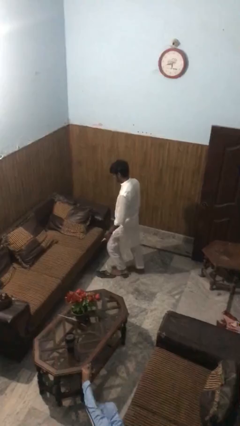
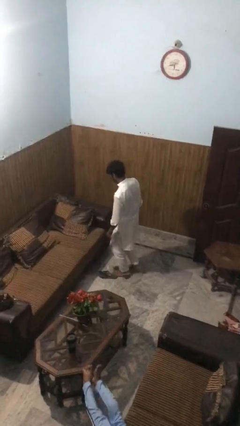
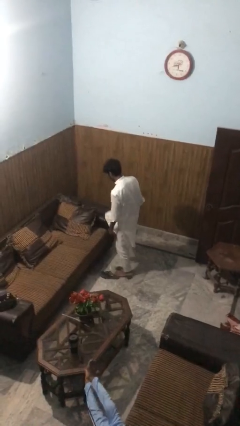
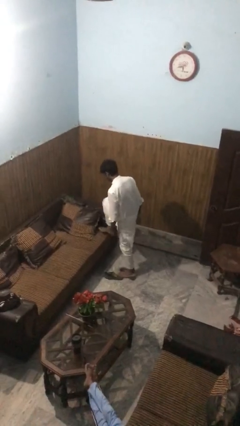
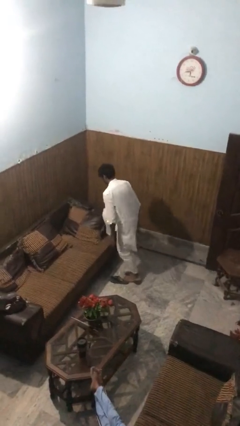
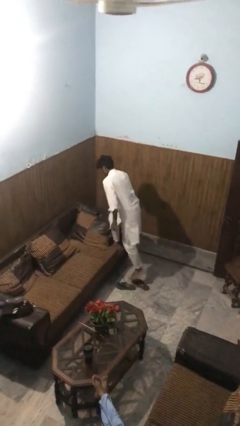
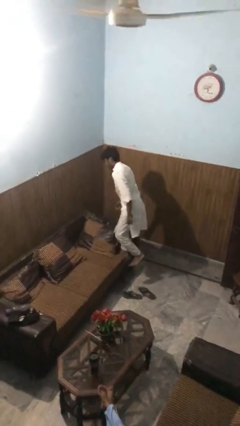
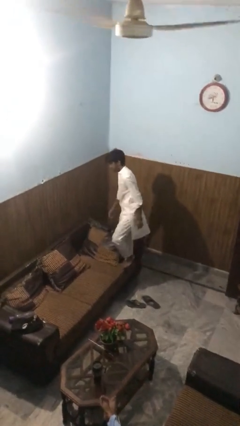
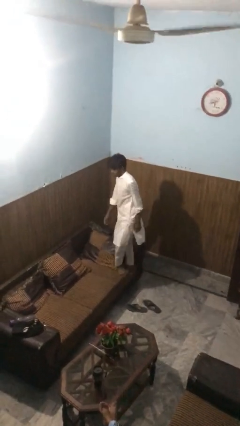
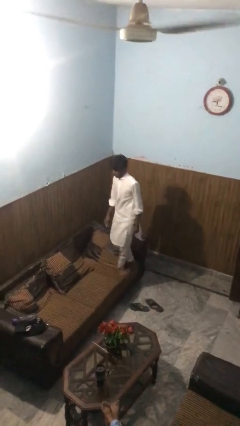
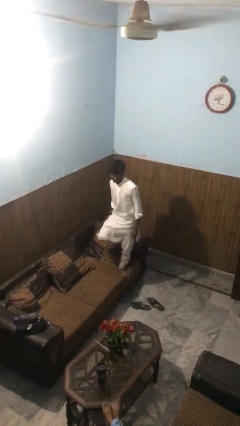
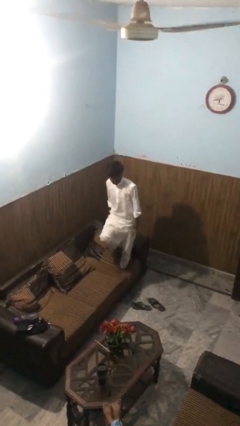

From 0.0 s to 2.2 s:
person climbs on couch

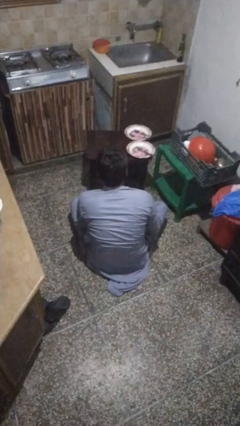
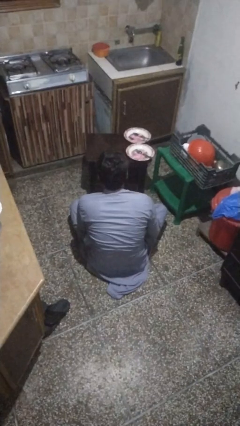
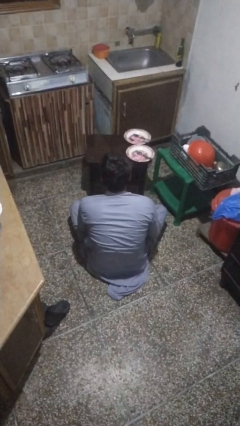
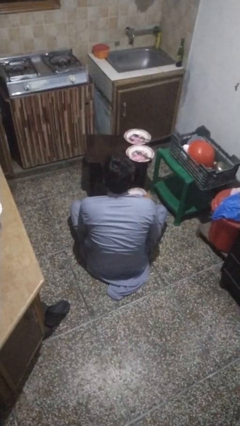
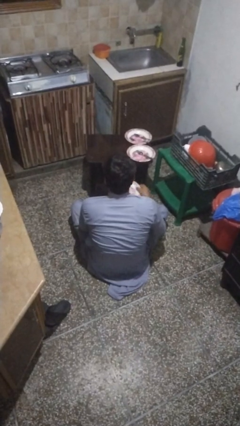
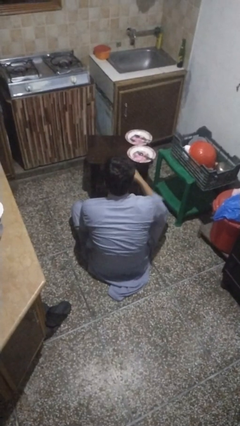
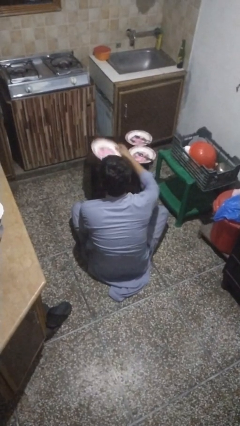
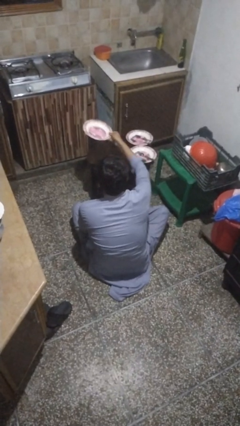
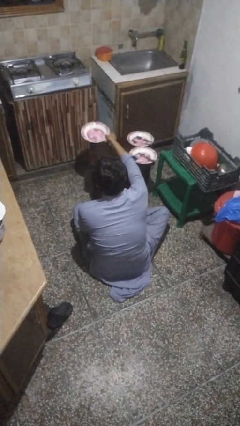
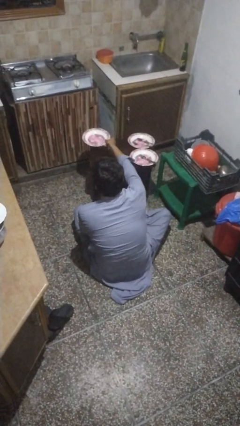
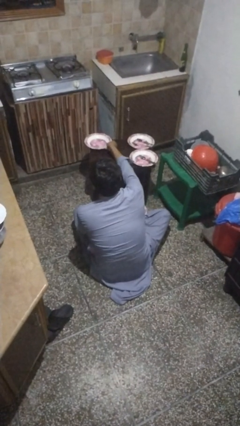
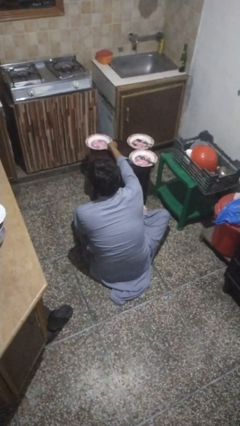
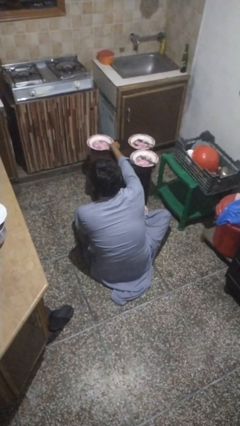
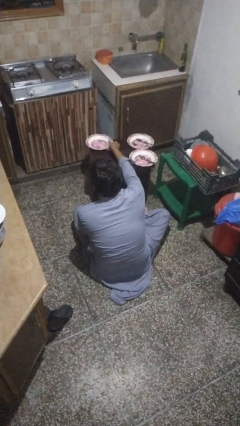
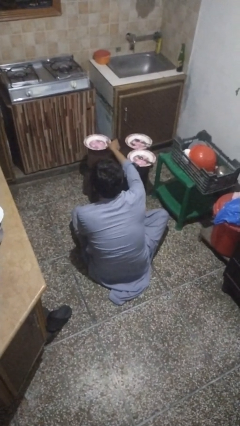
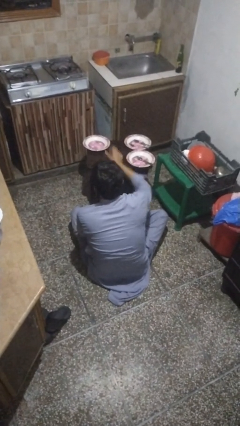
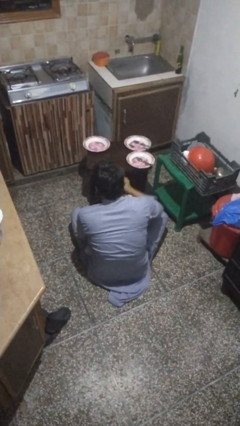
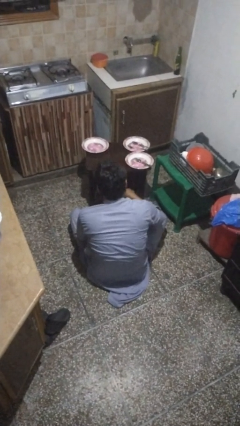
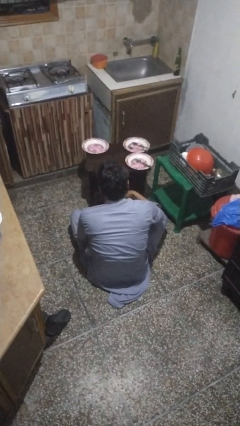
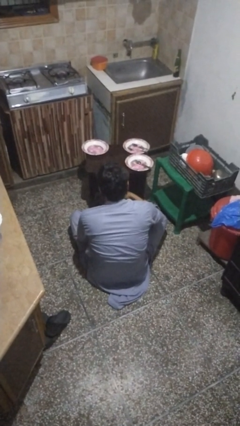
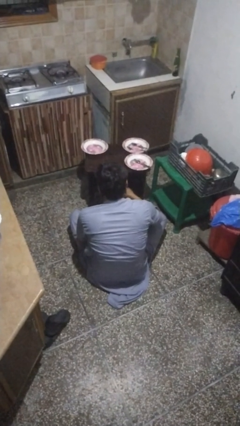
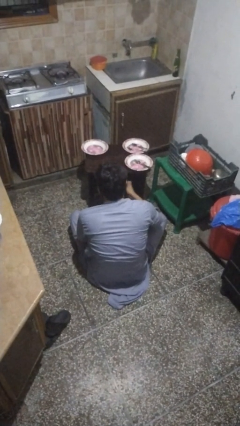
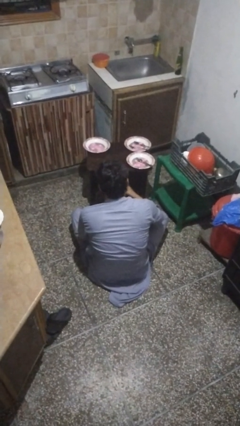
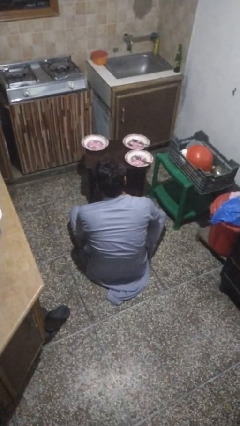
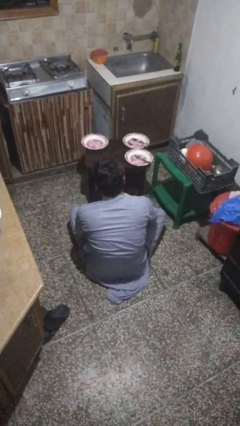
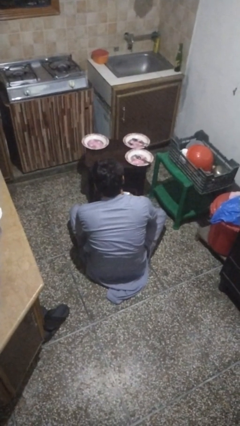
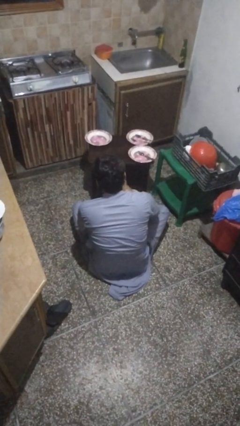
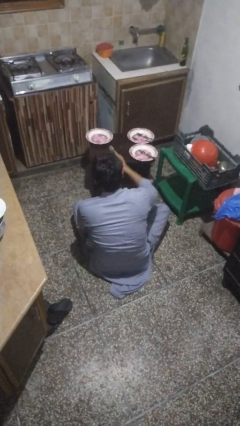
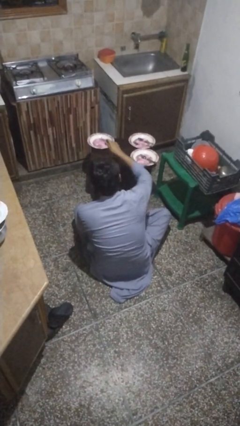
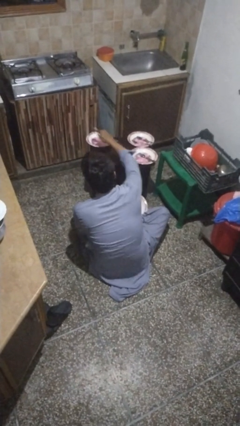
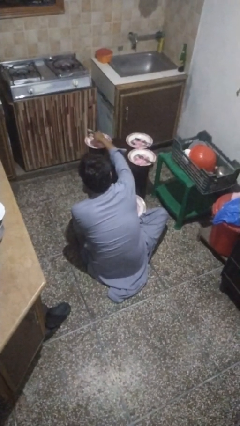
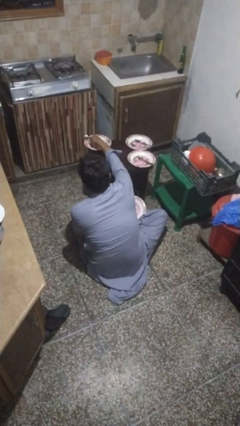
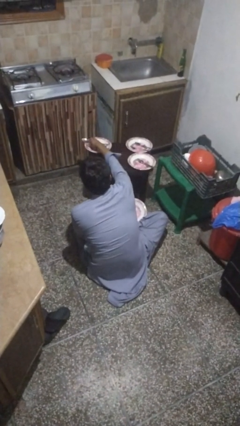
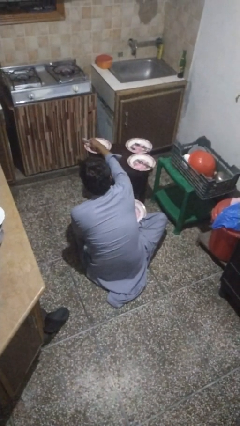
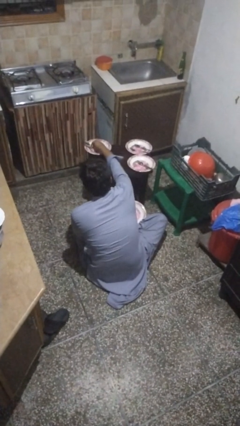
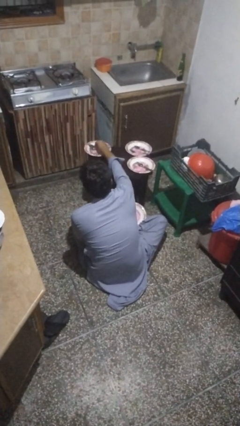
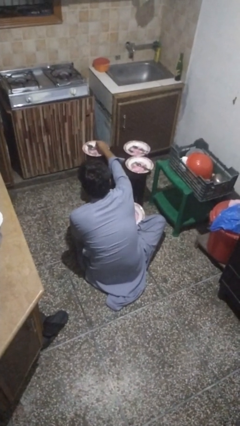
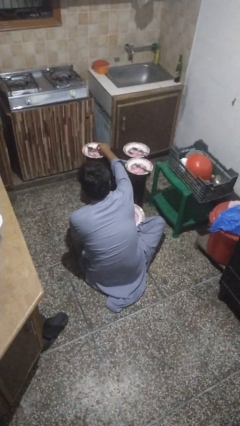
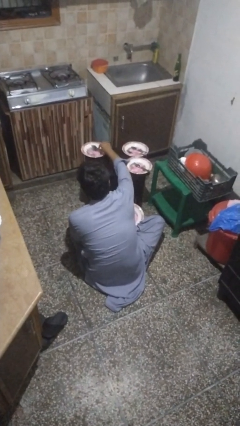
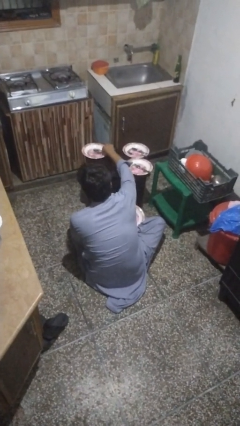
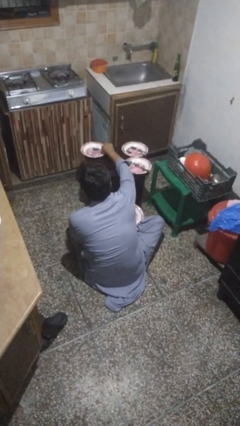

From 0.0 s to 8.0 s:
person sets table

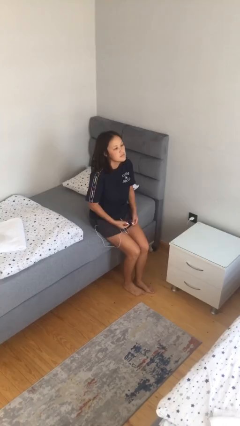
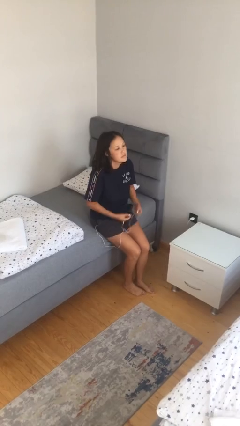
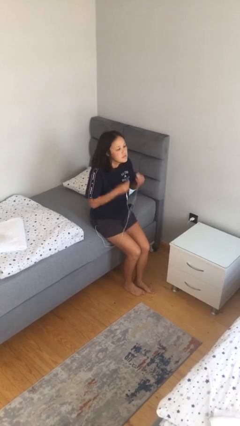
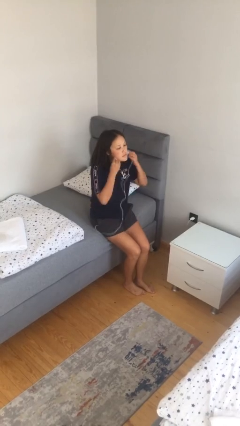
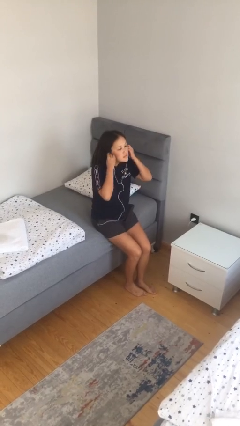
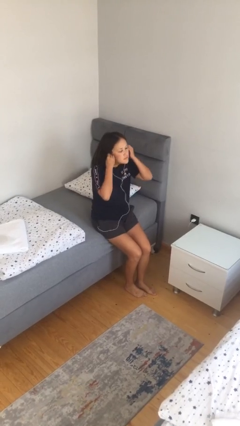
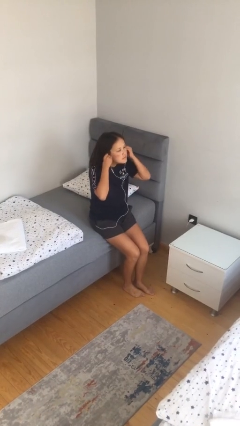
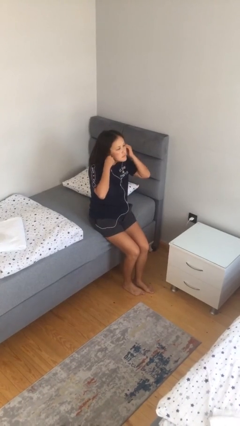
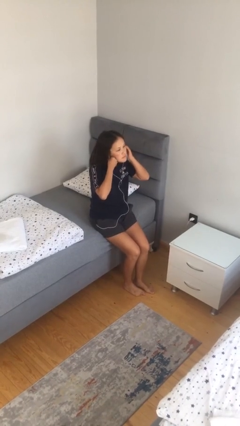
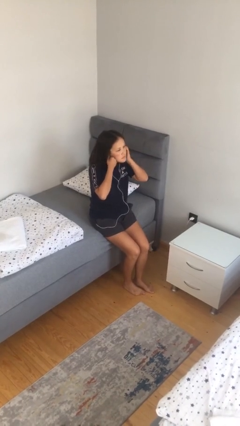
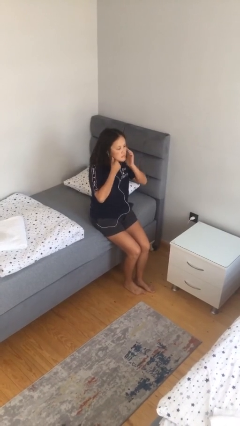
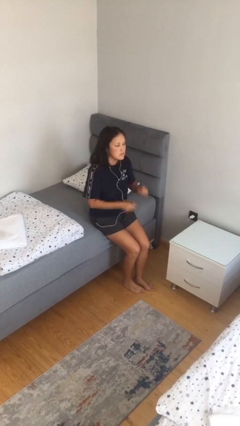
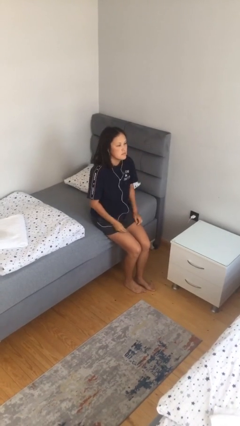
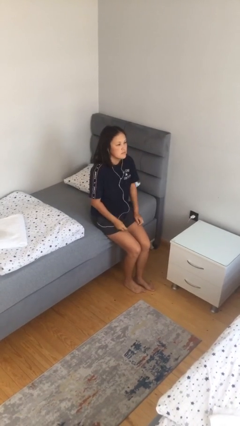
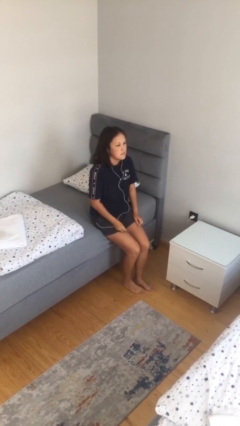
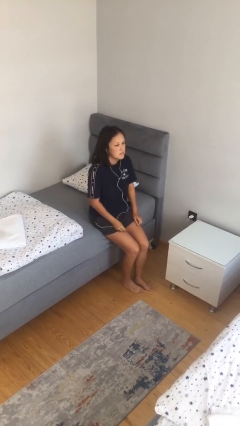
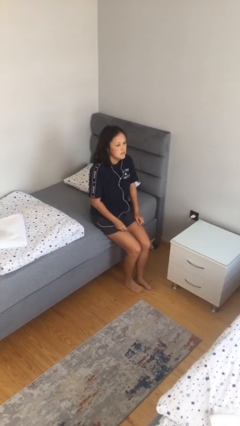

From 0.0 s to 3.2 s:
person puts on headphones

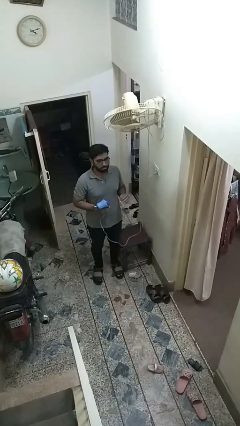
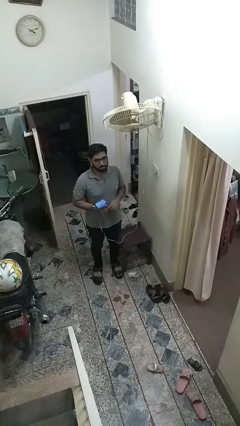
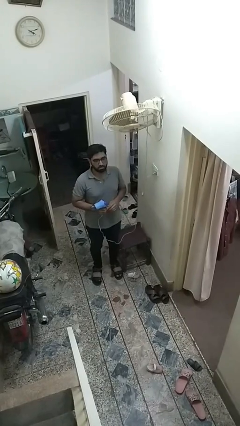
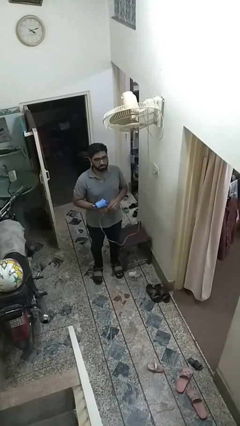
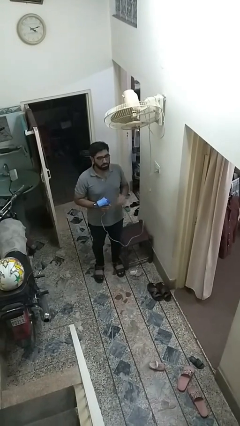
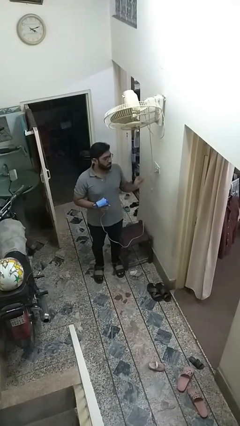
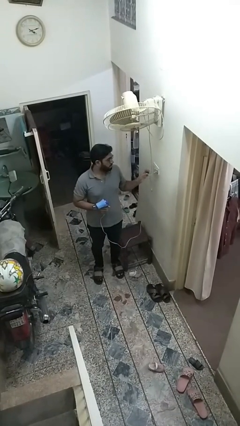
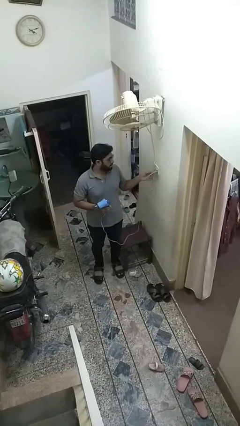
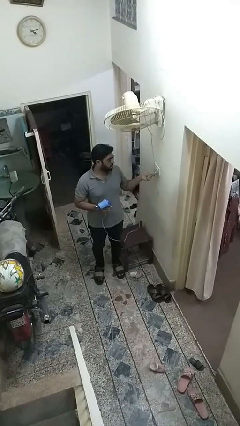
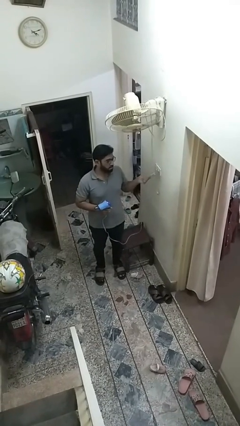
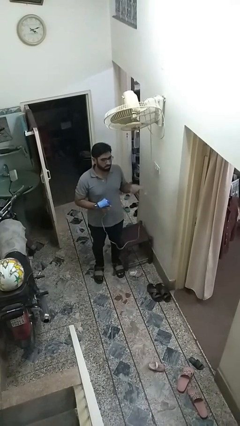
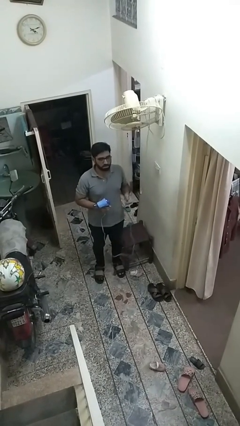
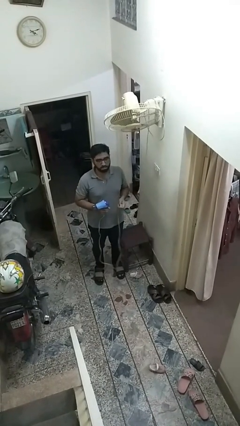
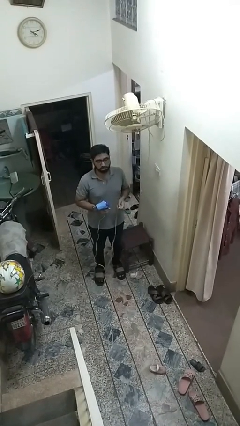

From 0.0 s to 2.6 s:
person unplugs from electrical socket

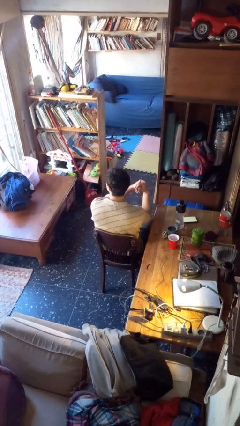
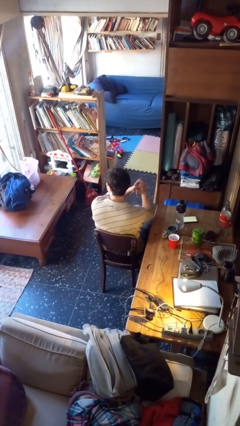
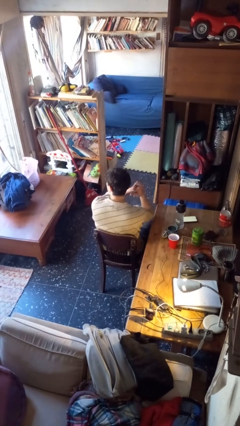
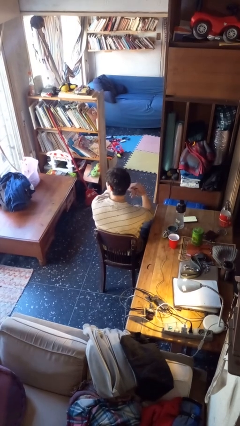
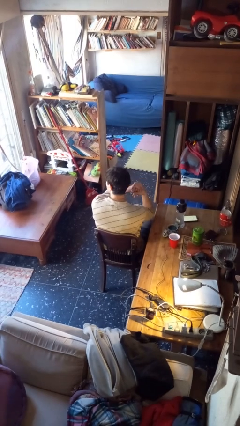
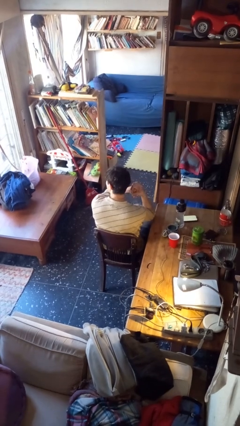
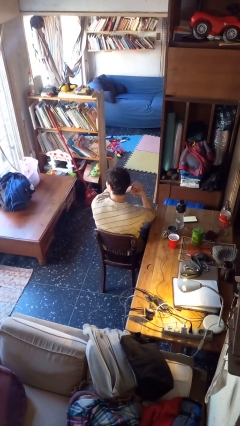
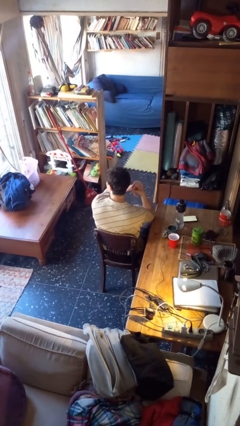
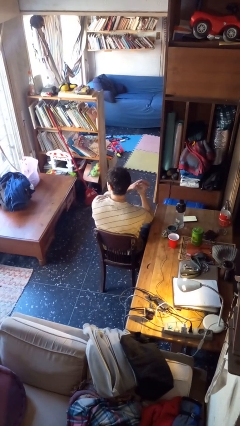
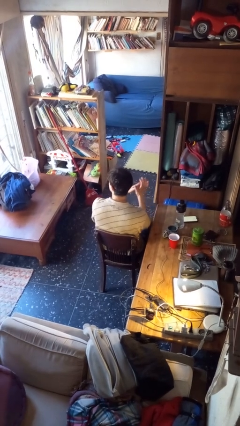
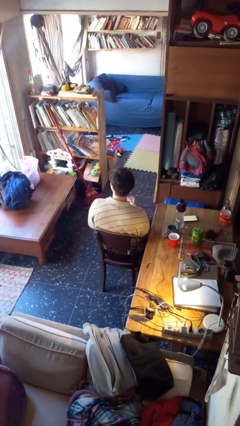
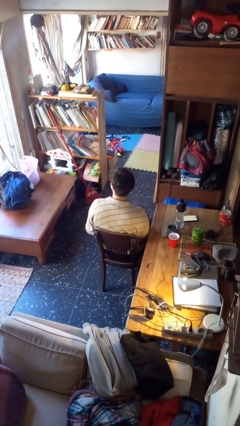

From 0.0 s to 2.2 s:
person snaps fingers
